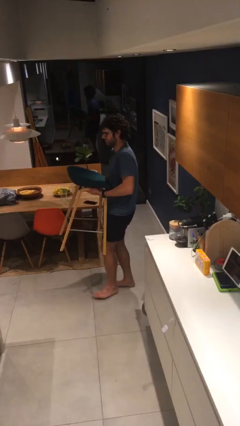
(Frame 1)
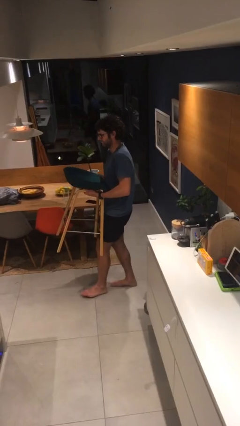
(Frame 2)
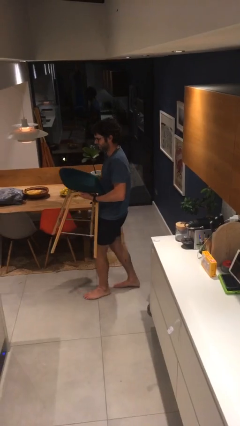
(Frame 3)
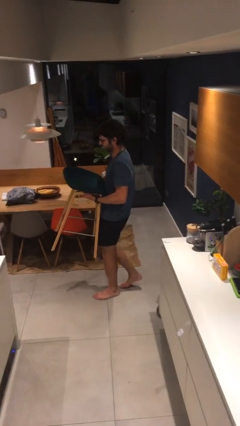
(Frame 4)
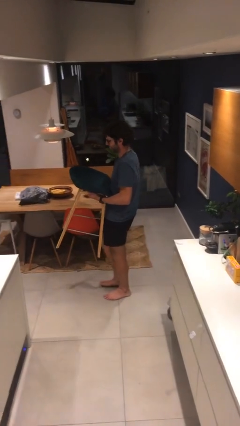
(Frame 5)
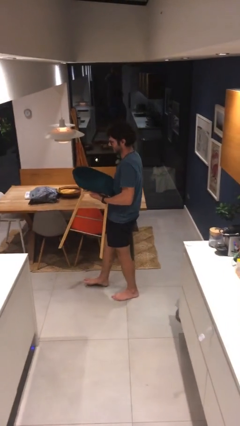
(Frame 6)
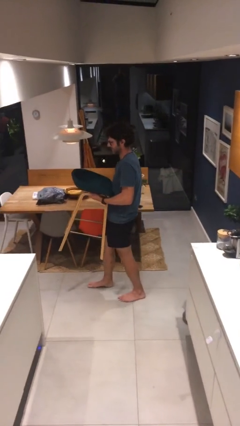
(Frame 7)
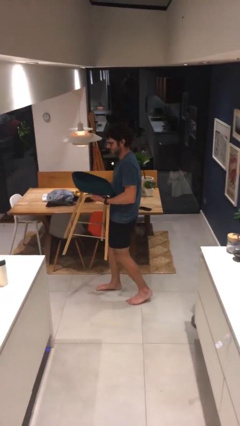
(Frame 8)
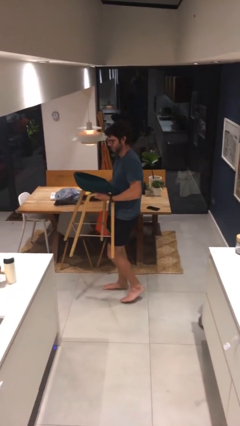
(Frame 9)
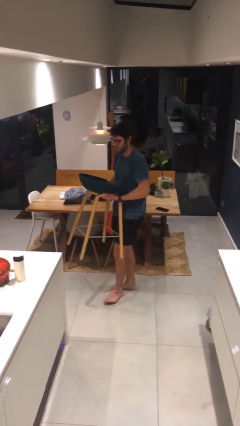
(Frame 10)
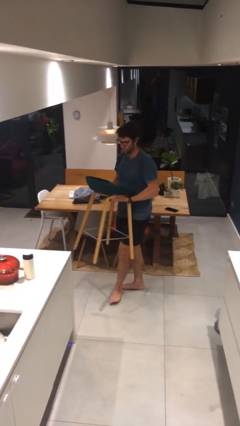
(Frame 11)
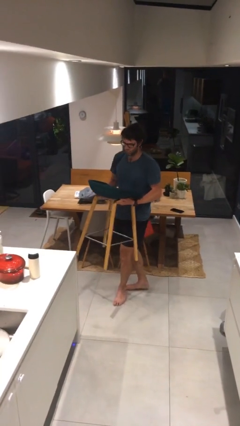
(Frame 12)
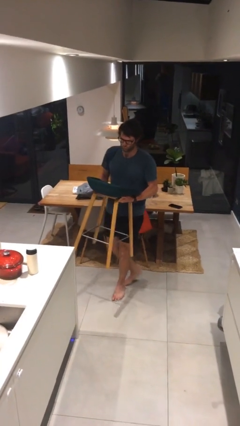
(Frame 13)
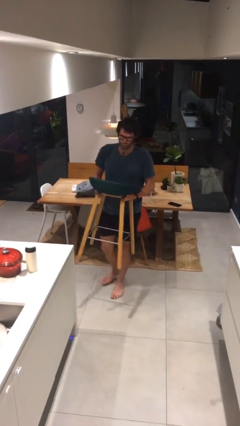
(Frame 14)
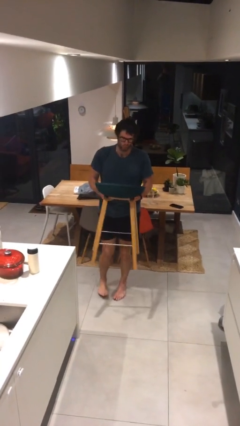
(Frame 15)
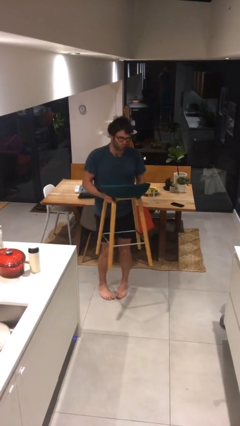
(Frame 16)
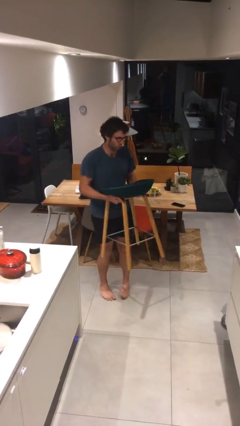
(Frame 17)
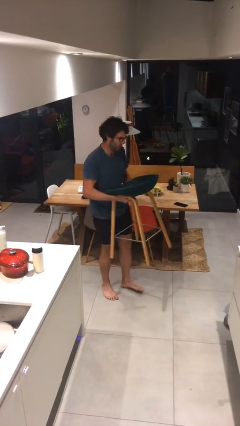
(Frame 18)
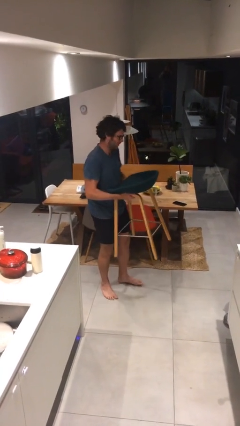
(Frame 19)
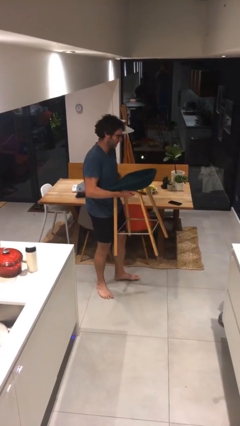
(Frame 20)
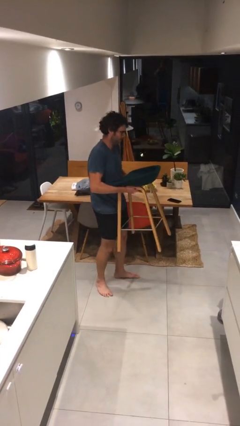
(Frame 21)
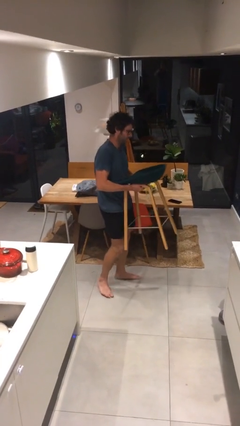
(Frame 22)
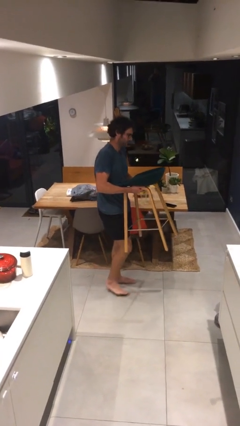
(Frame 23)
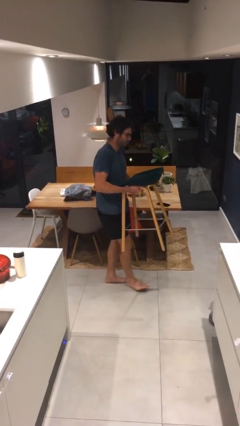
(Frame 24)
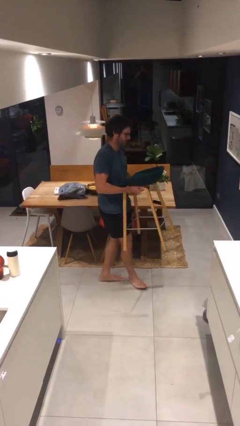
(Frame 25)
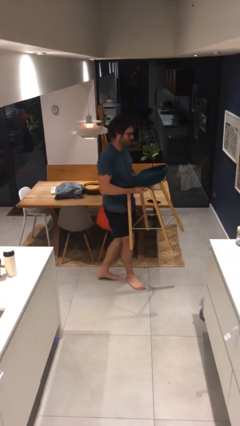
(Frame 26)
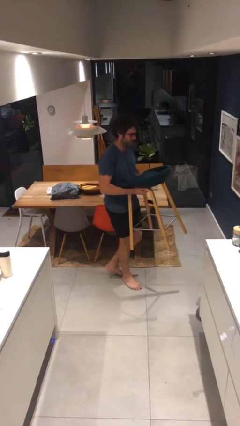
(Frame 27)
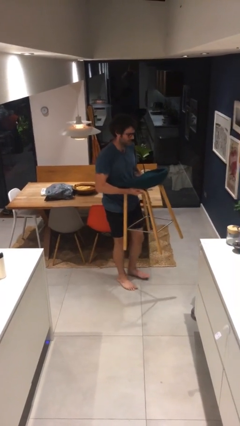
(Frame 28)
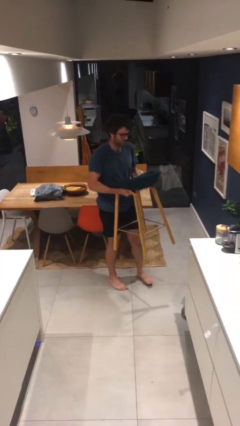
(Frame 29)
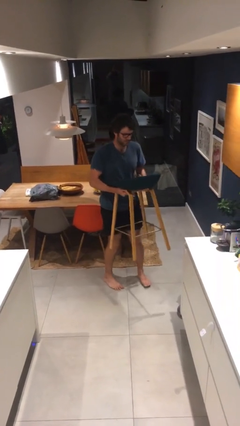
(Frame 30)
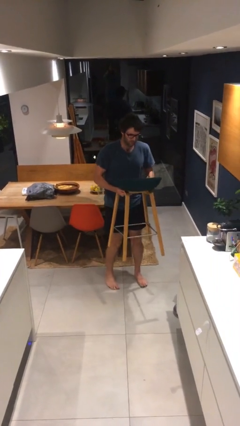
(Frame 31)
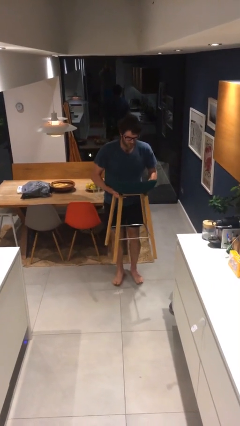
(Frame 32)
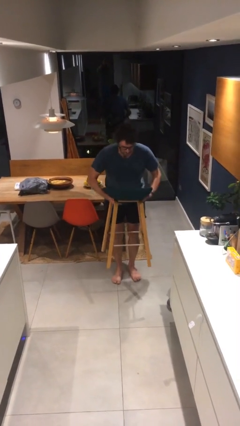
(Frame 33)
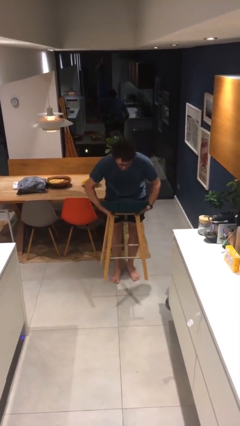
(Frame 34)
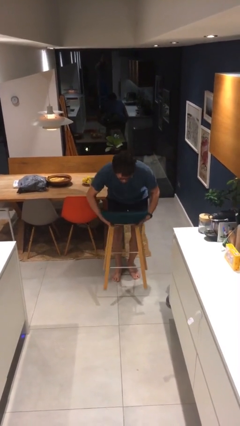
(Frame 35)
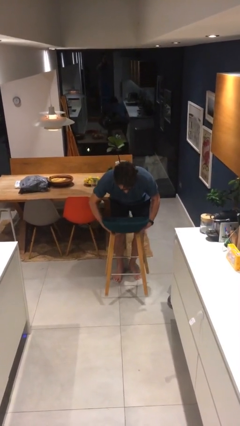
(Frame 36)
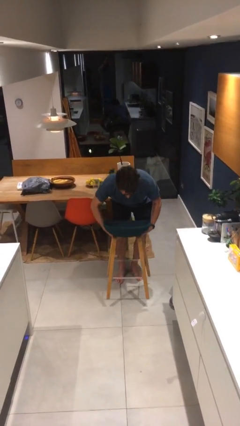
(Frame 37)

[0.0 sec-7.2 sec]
person carries heavy object

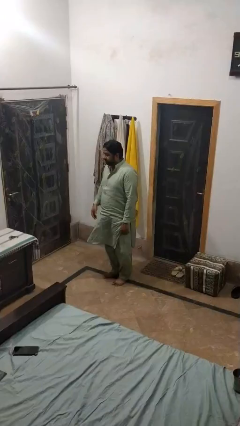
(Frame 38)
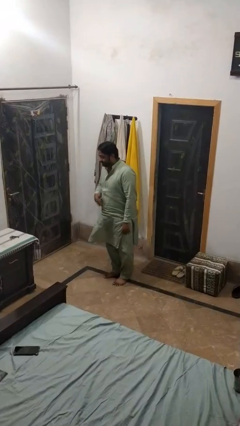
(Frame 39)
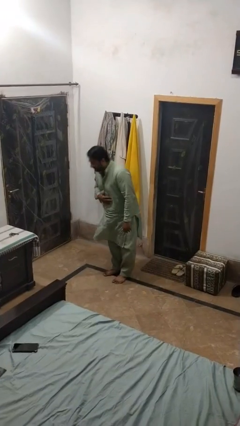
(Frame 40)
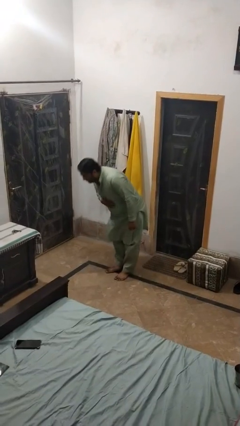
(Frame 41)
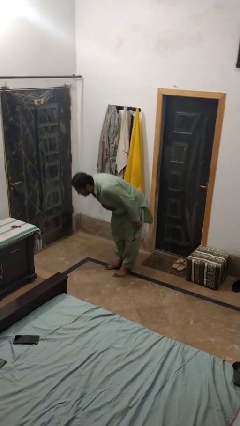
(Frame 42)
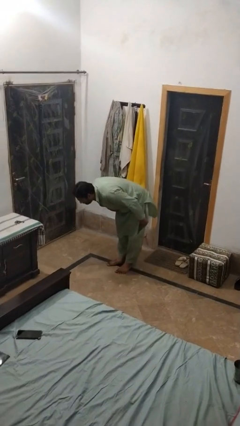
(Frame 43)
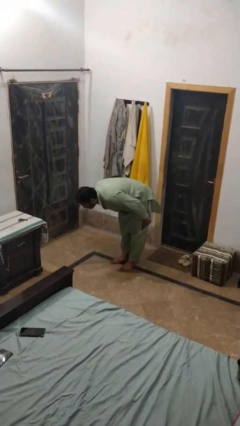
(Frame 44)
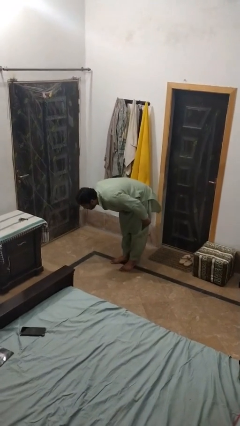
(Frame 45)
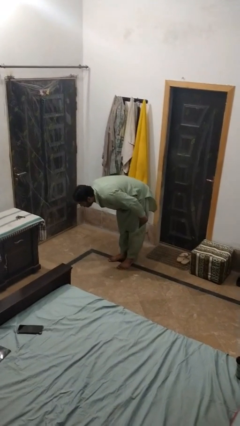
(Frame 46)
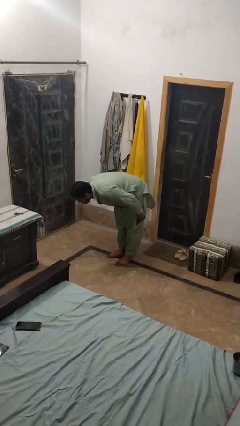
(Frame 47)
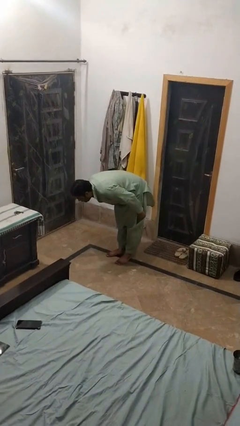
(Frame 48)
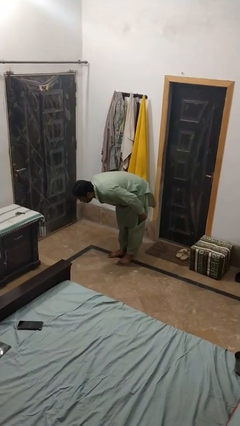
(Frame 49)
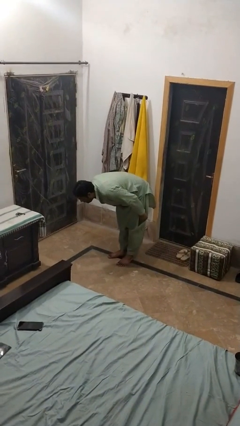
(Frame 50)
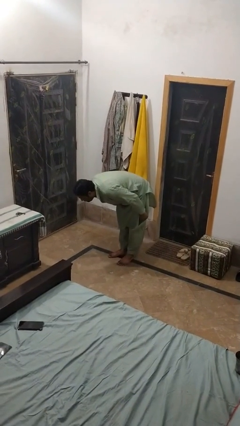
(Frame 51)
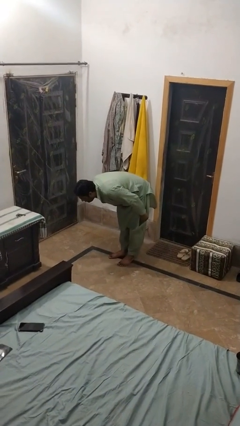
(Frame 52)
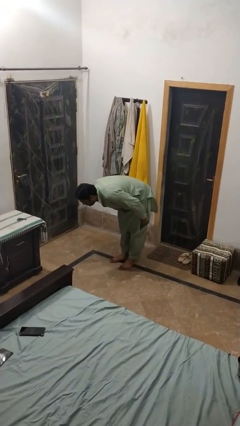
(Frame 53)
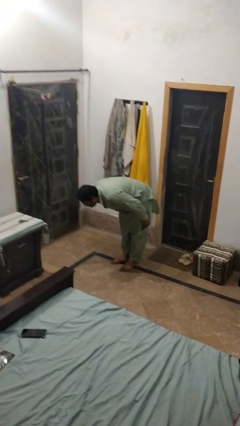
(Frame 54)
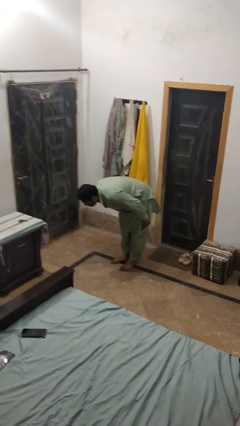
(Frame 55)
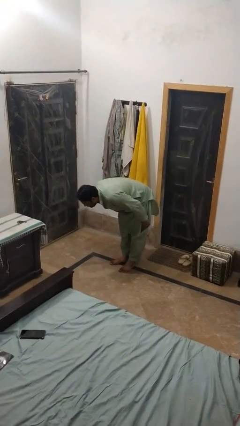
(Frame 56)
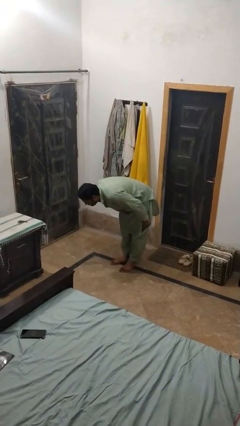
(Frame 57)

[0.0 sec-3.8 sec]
person bows

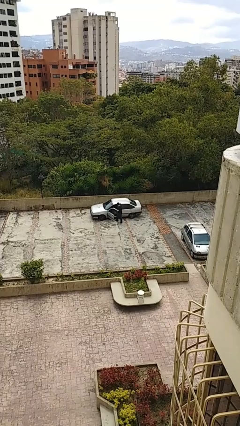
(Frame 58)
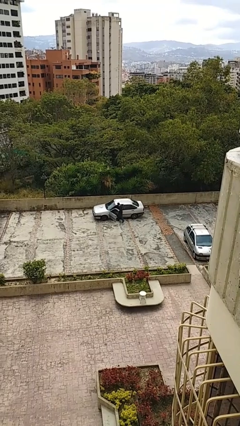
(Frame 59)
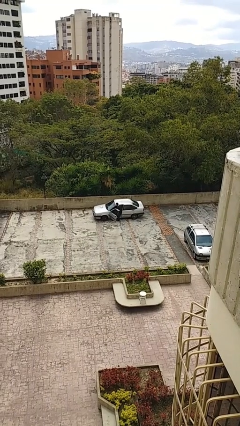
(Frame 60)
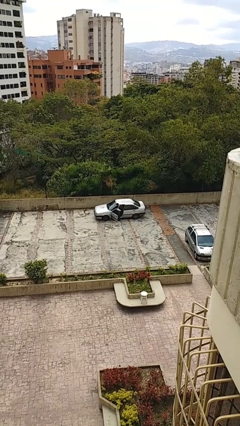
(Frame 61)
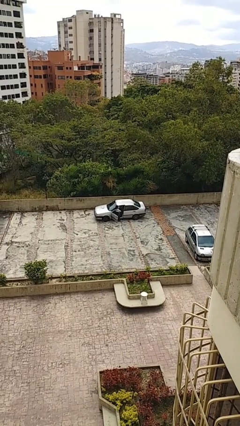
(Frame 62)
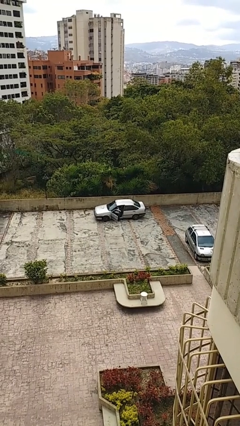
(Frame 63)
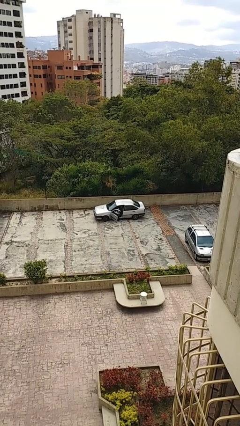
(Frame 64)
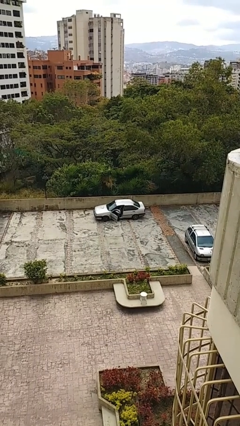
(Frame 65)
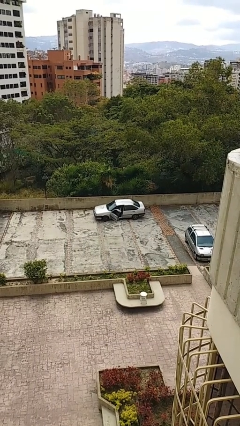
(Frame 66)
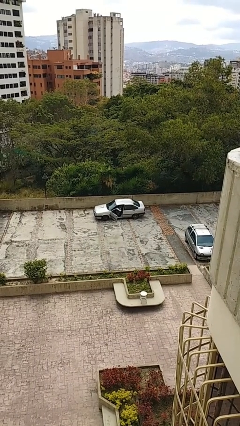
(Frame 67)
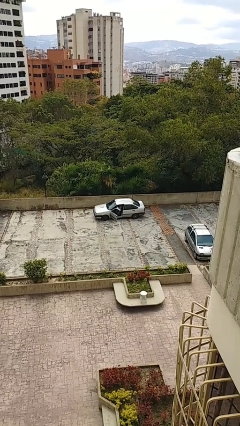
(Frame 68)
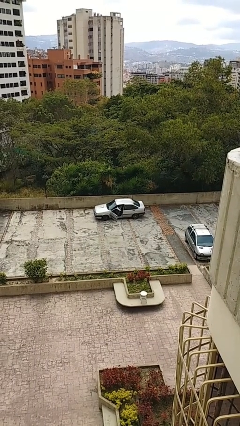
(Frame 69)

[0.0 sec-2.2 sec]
person enters car

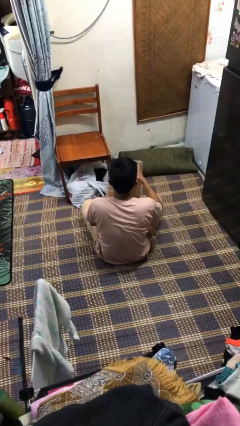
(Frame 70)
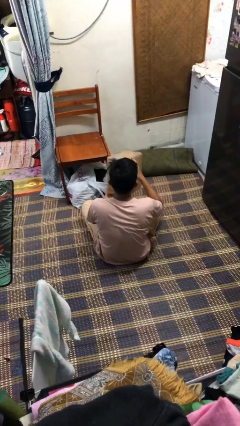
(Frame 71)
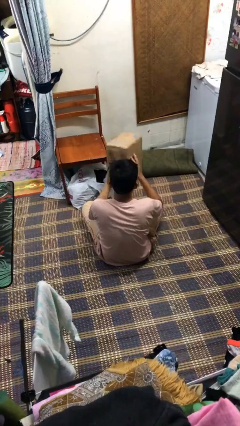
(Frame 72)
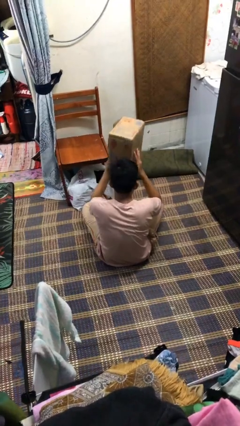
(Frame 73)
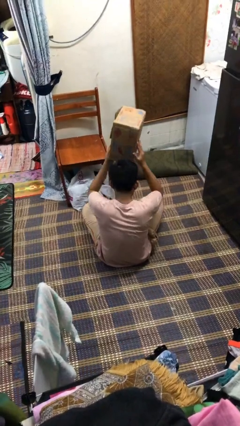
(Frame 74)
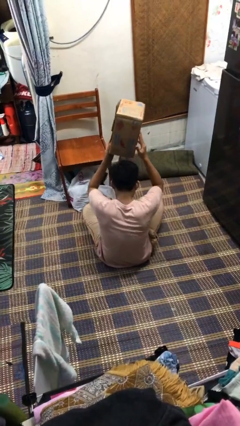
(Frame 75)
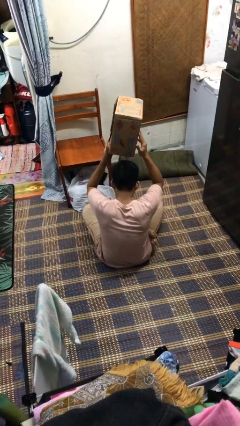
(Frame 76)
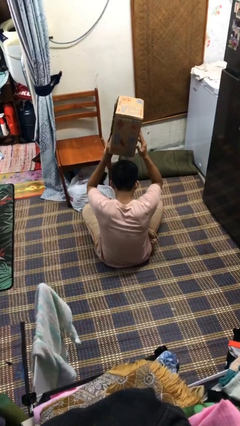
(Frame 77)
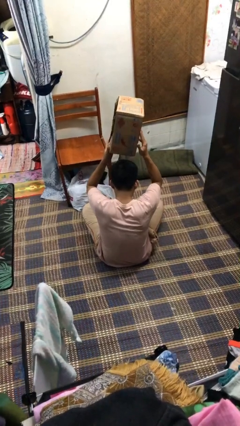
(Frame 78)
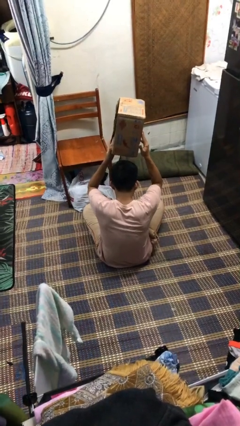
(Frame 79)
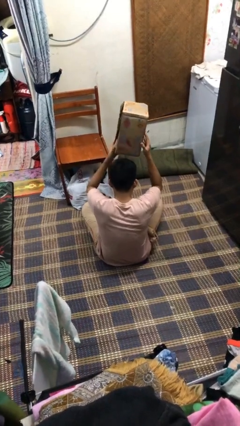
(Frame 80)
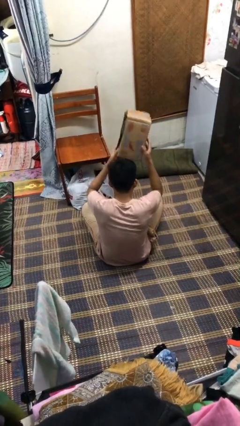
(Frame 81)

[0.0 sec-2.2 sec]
person holds object above head

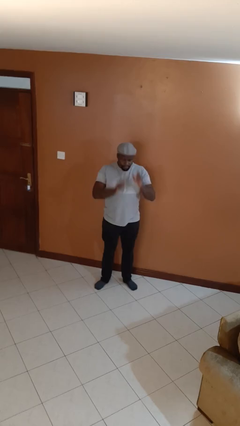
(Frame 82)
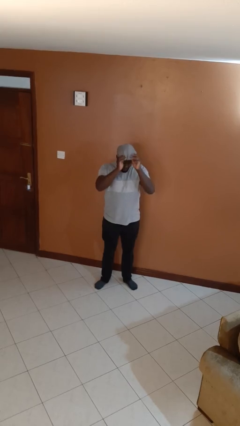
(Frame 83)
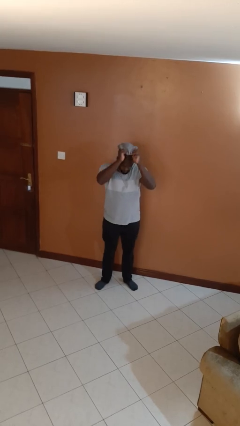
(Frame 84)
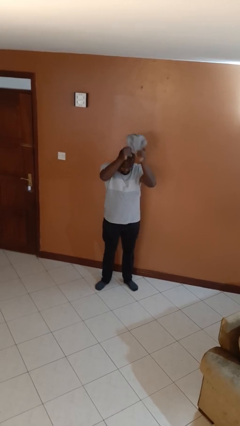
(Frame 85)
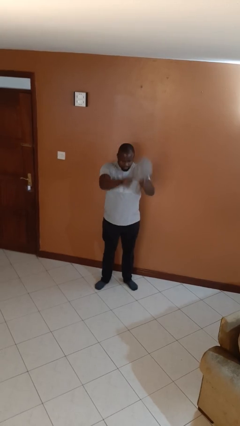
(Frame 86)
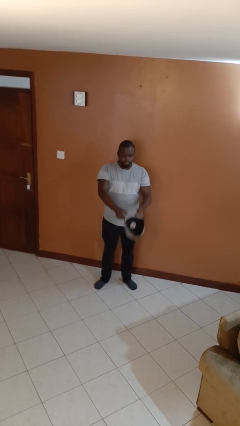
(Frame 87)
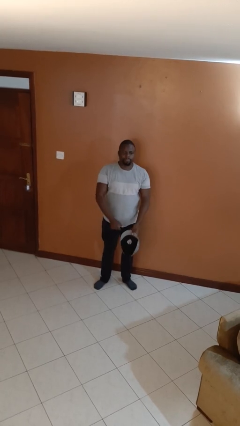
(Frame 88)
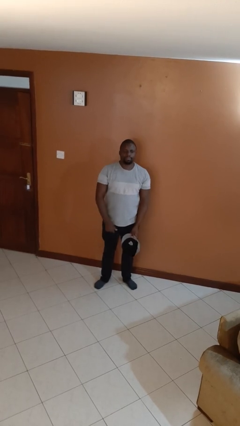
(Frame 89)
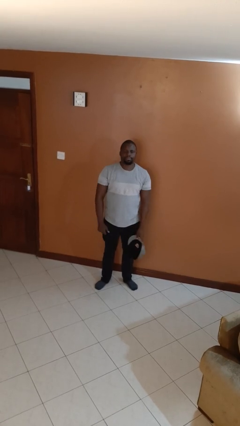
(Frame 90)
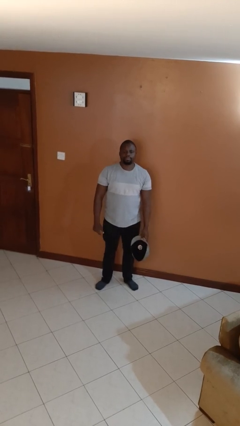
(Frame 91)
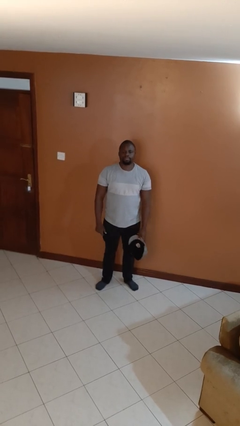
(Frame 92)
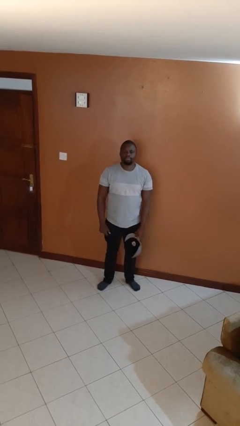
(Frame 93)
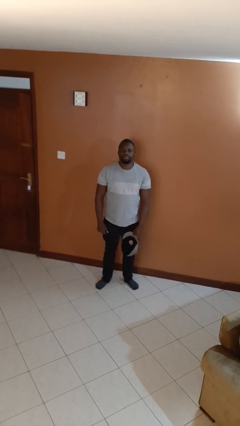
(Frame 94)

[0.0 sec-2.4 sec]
person takes off hat
